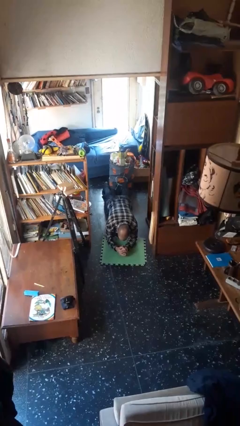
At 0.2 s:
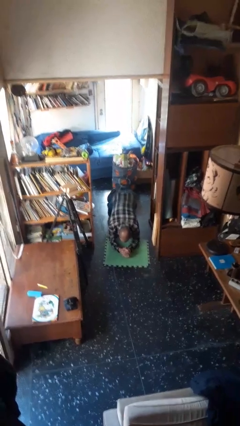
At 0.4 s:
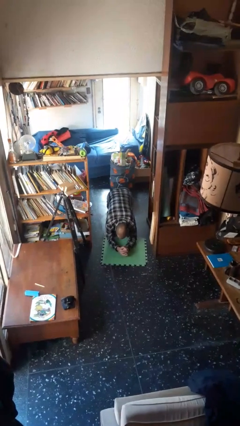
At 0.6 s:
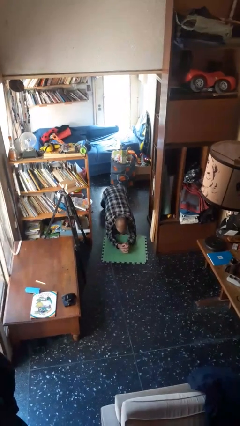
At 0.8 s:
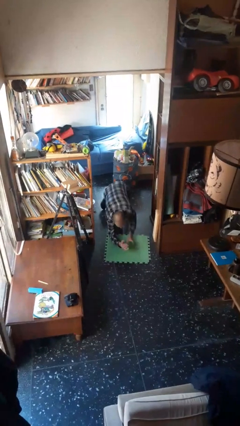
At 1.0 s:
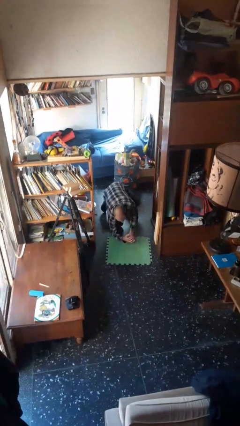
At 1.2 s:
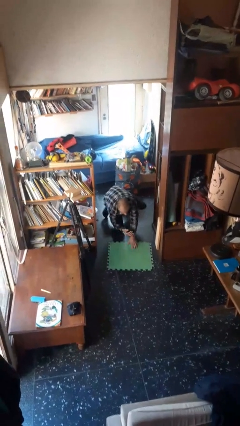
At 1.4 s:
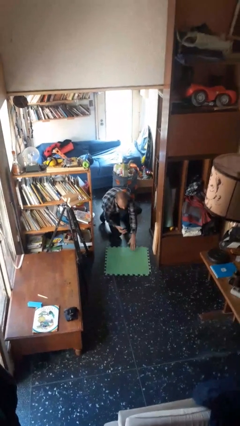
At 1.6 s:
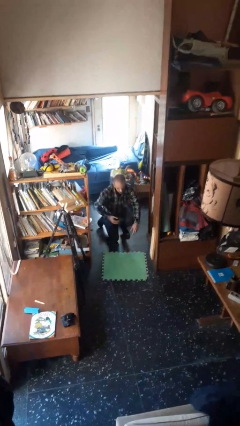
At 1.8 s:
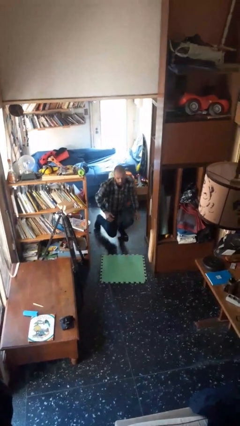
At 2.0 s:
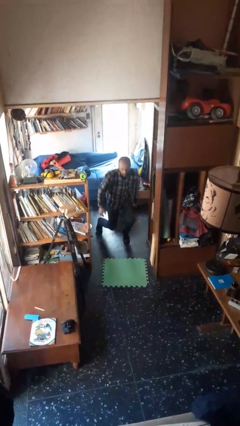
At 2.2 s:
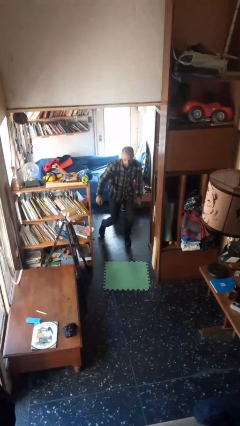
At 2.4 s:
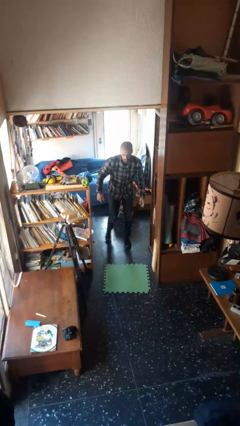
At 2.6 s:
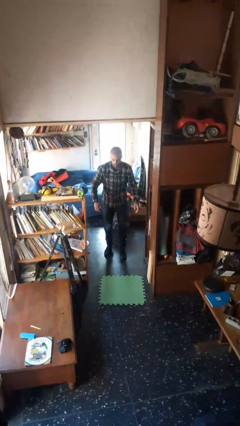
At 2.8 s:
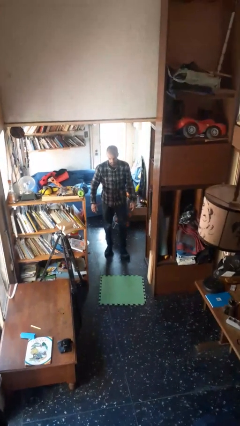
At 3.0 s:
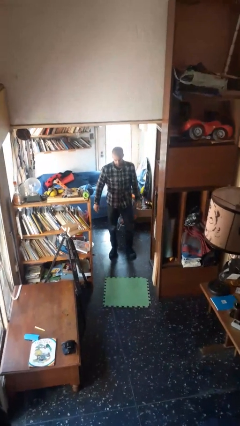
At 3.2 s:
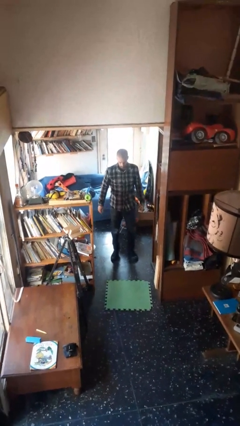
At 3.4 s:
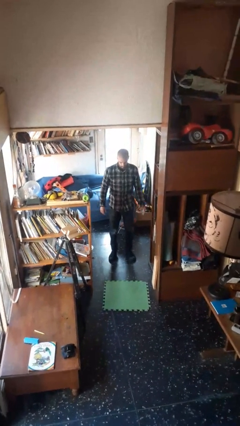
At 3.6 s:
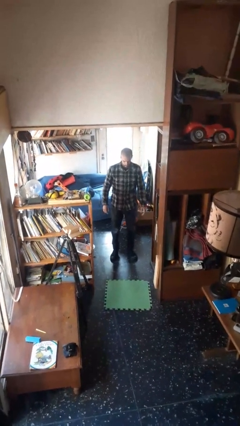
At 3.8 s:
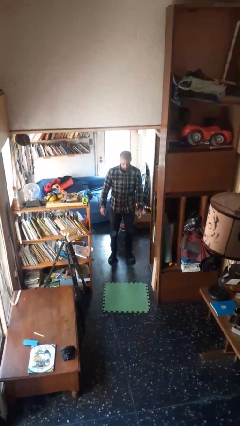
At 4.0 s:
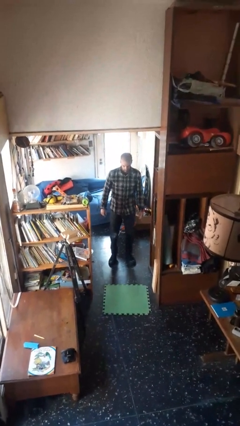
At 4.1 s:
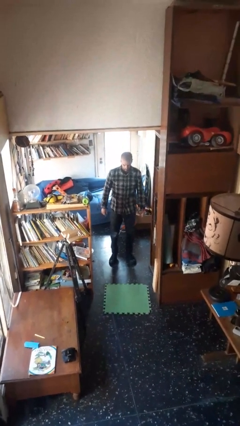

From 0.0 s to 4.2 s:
person stands up from floor

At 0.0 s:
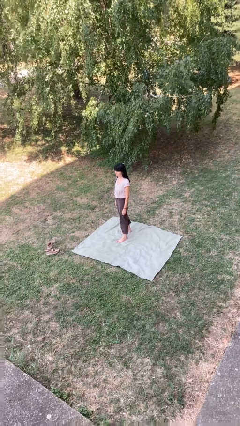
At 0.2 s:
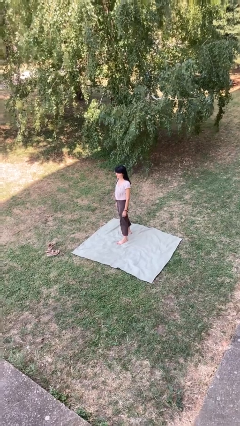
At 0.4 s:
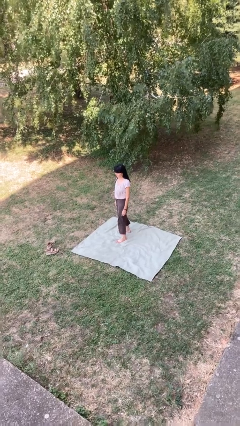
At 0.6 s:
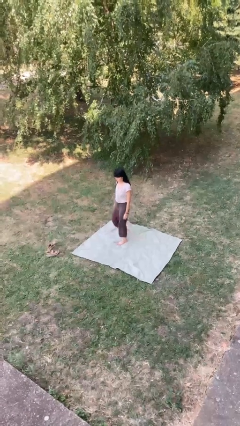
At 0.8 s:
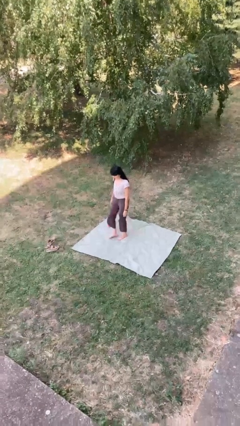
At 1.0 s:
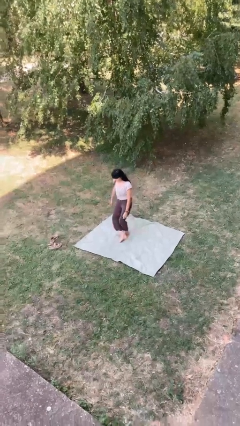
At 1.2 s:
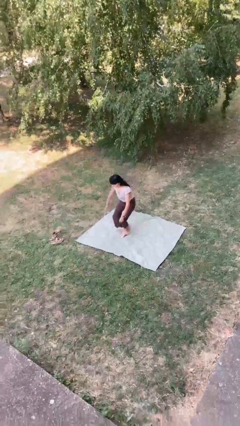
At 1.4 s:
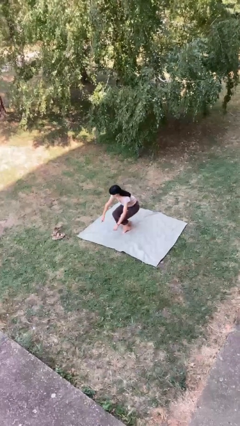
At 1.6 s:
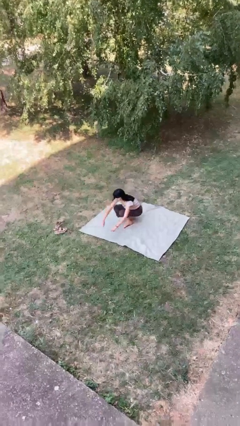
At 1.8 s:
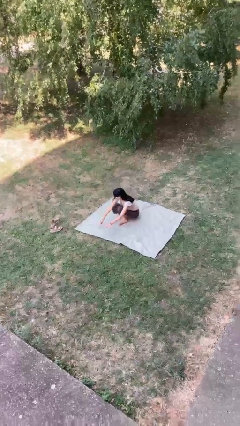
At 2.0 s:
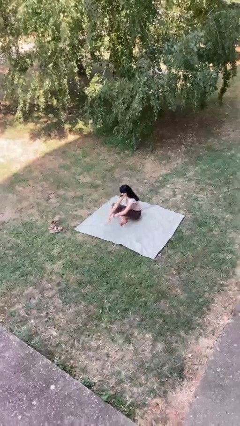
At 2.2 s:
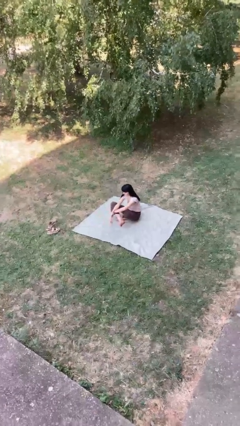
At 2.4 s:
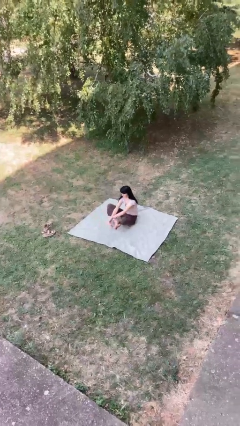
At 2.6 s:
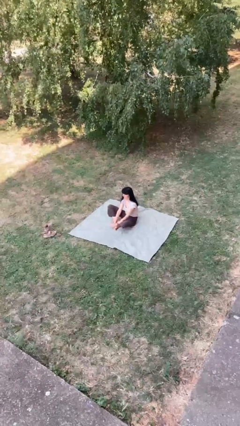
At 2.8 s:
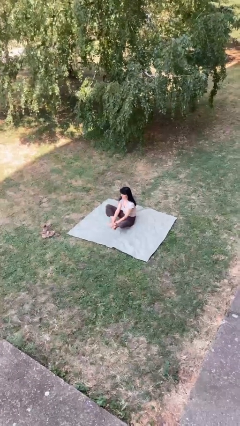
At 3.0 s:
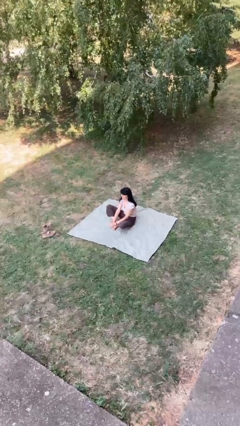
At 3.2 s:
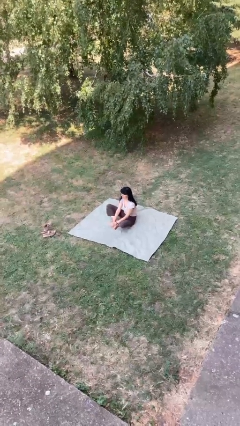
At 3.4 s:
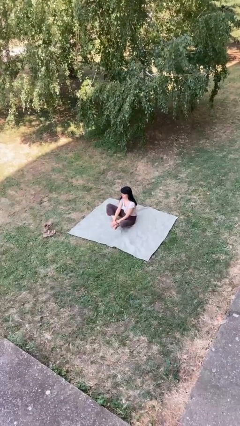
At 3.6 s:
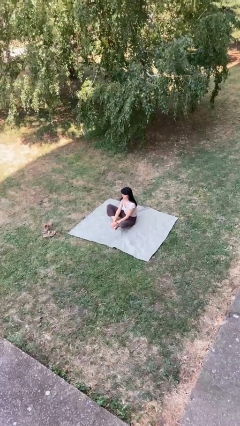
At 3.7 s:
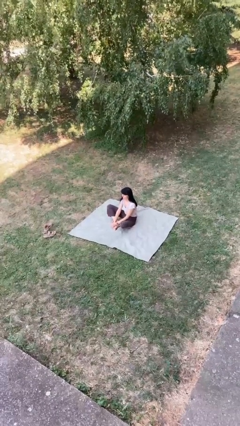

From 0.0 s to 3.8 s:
person sits crisscross

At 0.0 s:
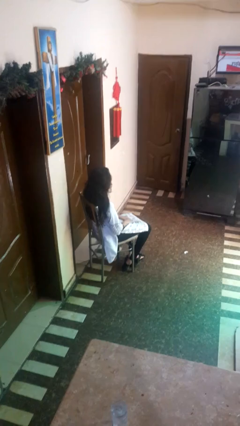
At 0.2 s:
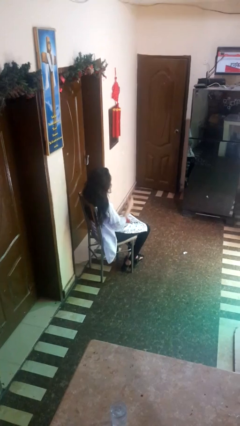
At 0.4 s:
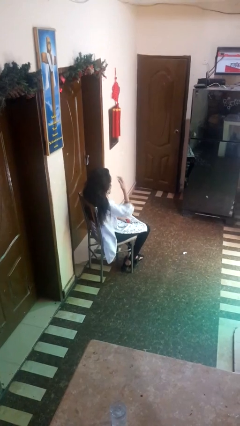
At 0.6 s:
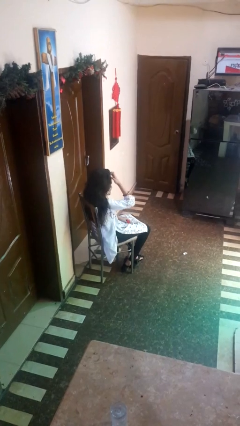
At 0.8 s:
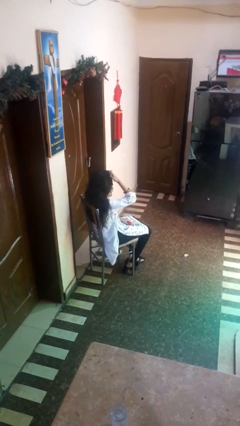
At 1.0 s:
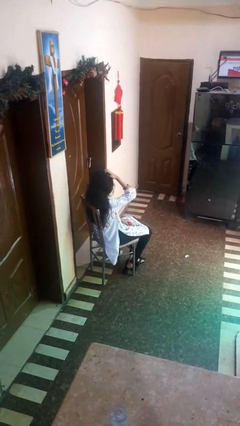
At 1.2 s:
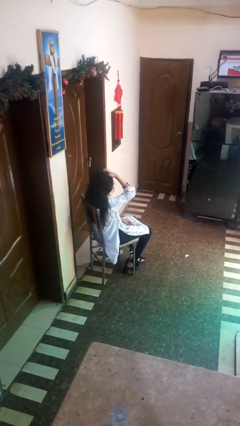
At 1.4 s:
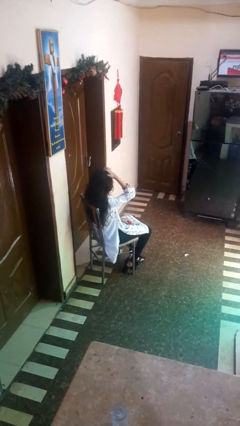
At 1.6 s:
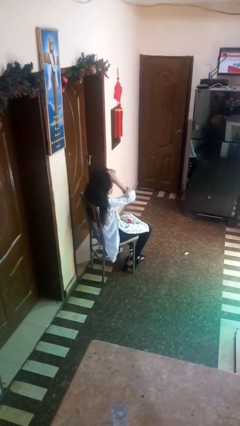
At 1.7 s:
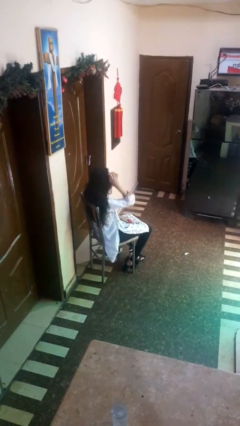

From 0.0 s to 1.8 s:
person strokes hair

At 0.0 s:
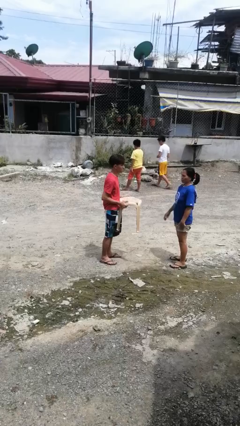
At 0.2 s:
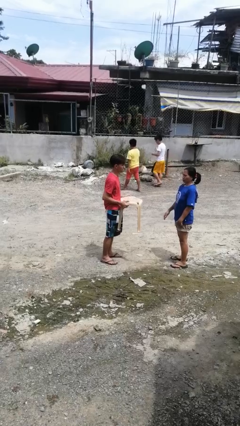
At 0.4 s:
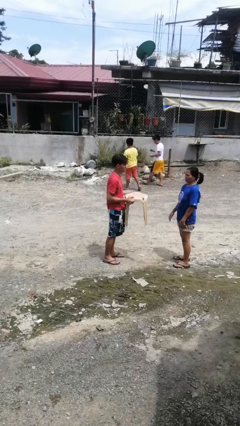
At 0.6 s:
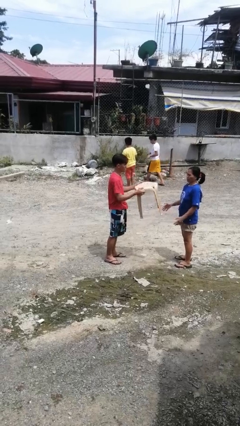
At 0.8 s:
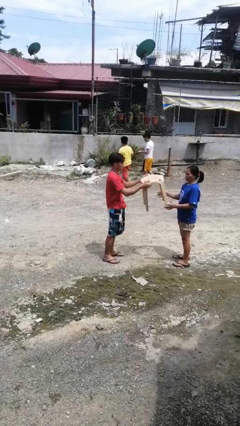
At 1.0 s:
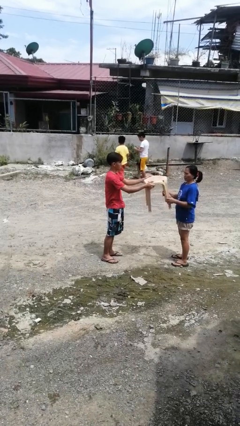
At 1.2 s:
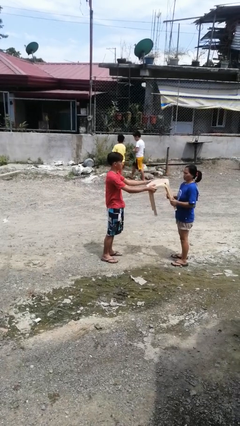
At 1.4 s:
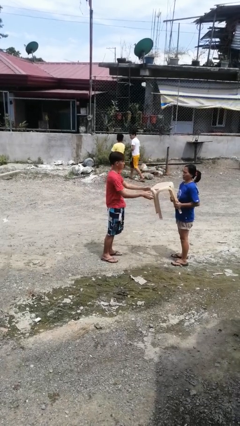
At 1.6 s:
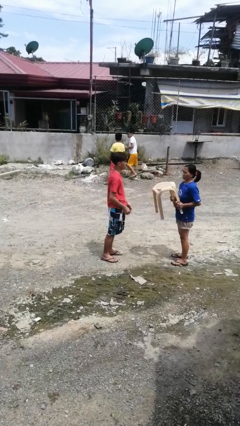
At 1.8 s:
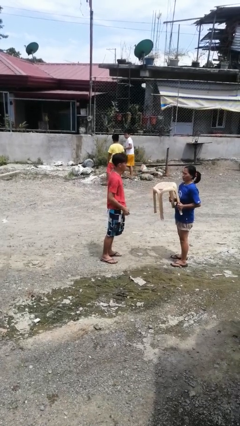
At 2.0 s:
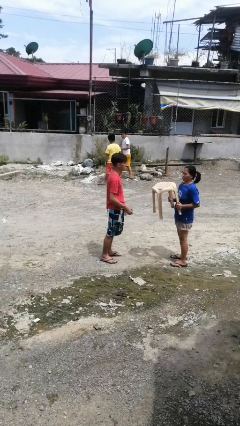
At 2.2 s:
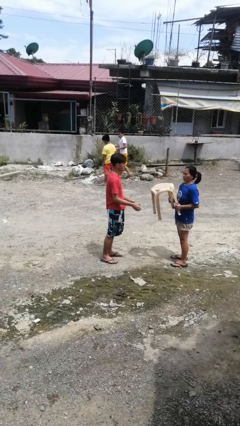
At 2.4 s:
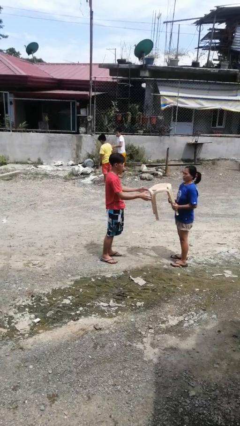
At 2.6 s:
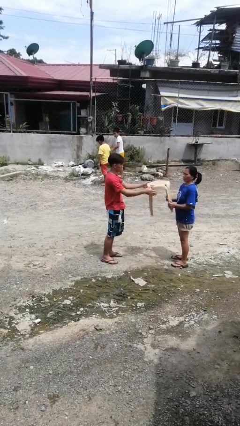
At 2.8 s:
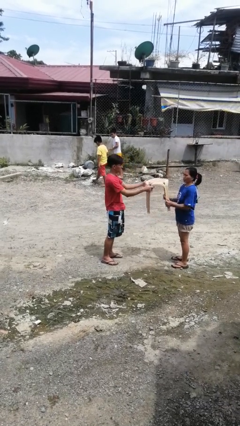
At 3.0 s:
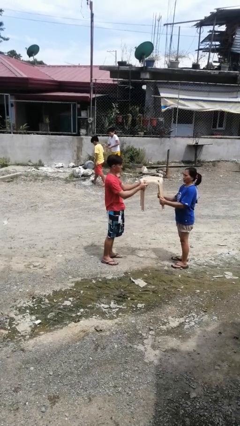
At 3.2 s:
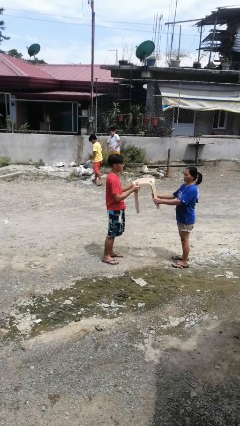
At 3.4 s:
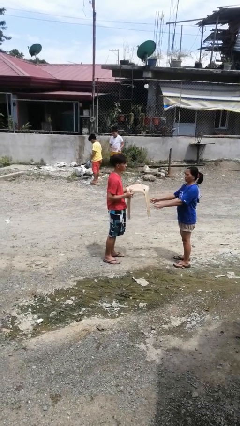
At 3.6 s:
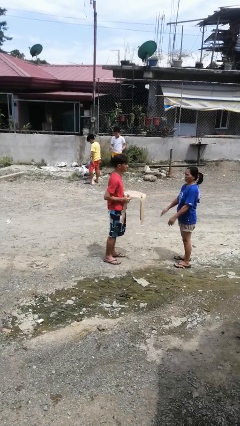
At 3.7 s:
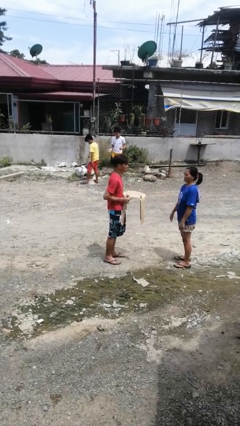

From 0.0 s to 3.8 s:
person transfers object to person

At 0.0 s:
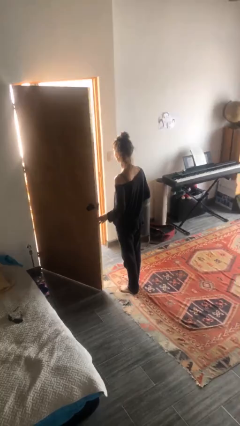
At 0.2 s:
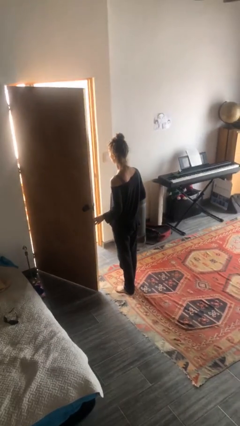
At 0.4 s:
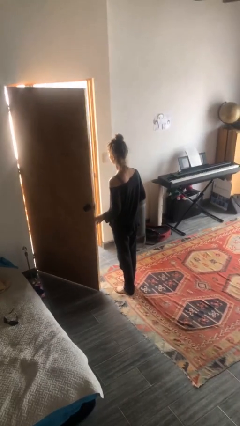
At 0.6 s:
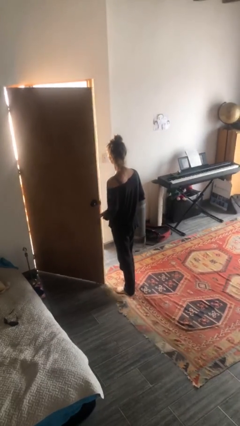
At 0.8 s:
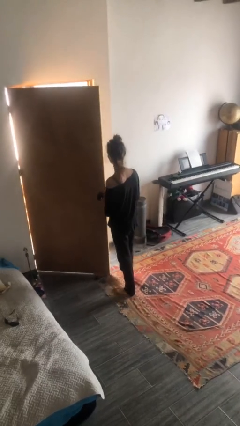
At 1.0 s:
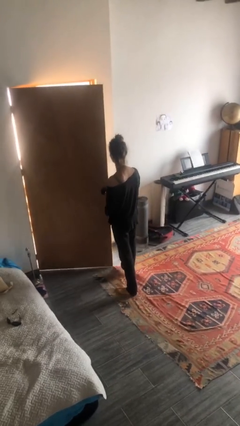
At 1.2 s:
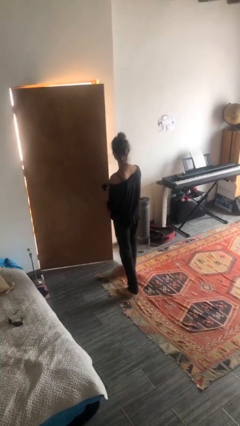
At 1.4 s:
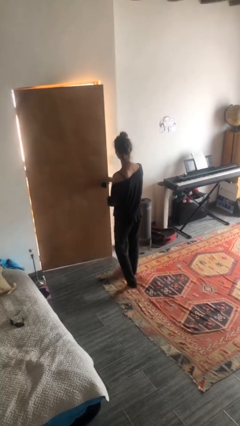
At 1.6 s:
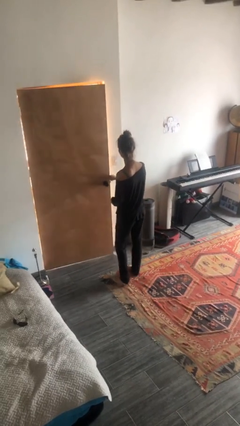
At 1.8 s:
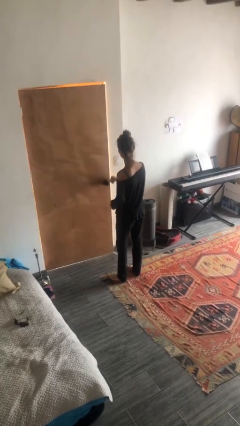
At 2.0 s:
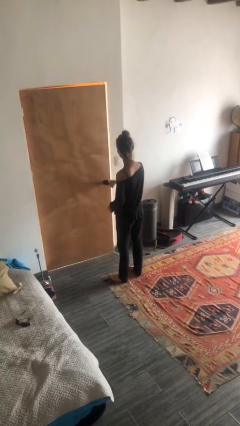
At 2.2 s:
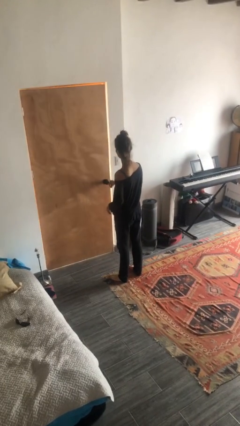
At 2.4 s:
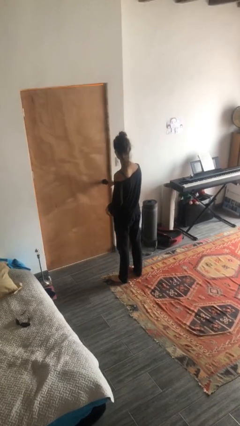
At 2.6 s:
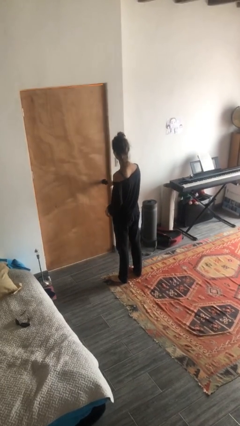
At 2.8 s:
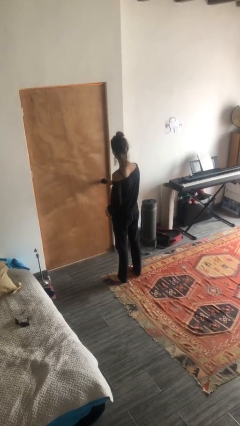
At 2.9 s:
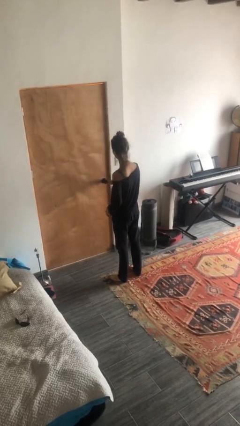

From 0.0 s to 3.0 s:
person closes facility door

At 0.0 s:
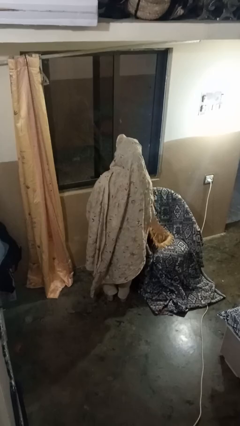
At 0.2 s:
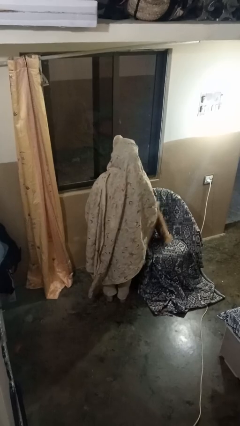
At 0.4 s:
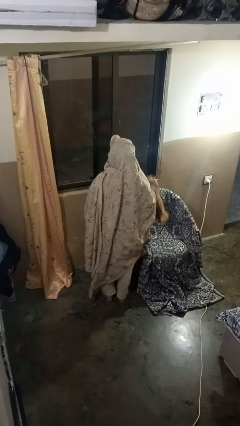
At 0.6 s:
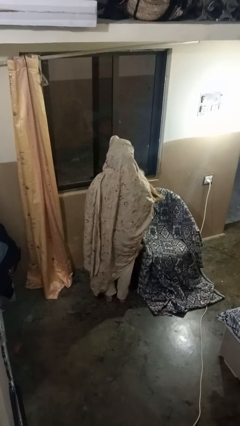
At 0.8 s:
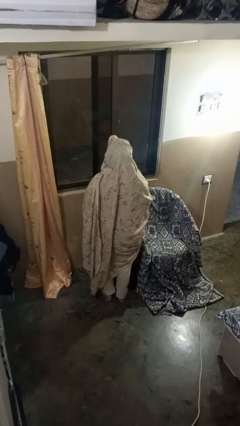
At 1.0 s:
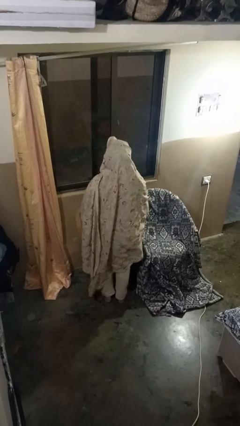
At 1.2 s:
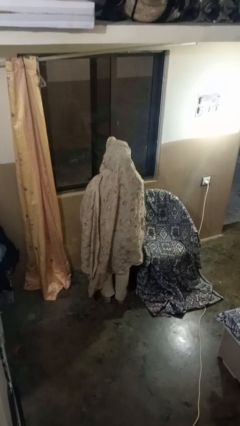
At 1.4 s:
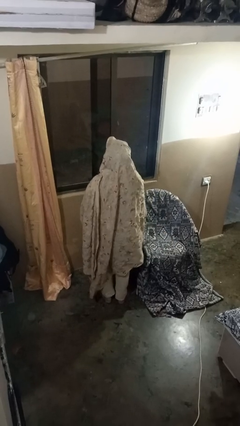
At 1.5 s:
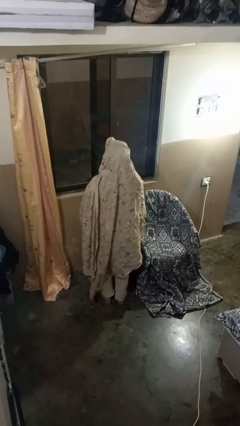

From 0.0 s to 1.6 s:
person picks up object from couch
